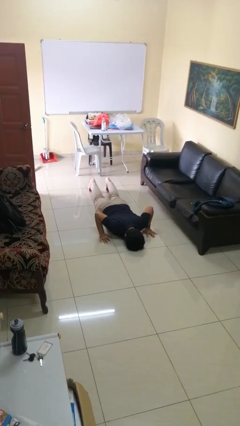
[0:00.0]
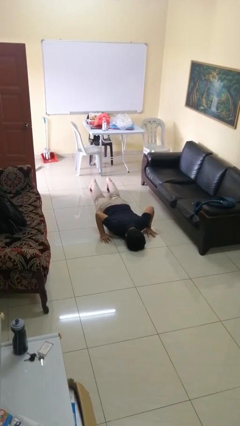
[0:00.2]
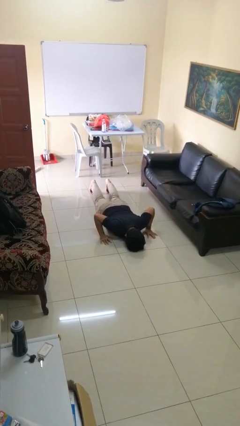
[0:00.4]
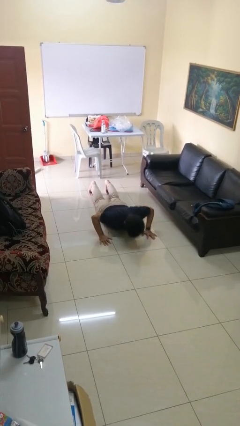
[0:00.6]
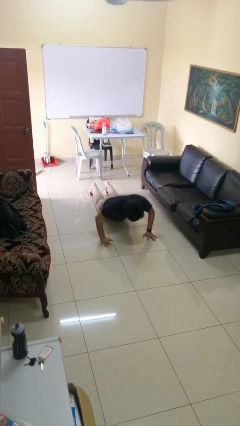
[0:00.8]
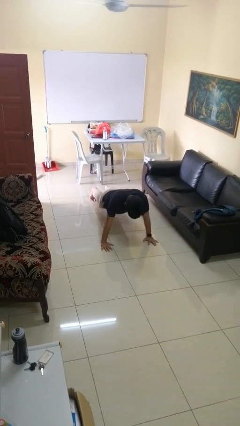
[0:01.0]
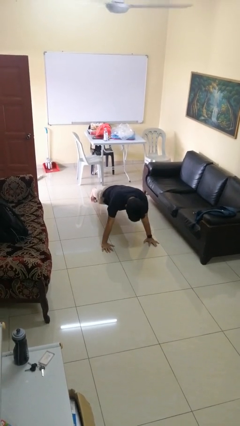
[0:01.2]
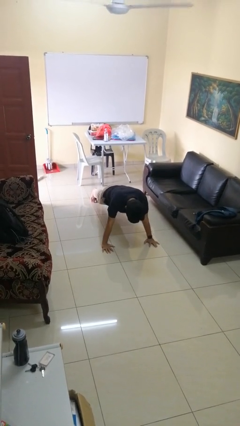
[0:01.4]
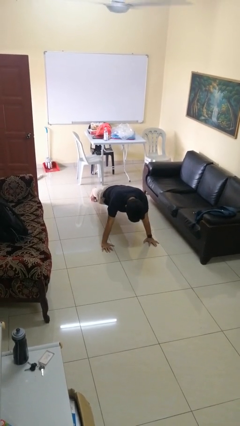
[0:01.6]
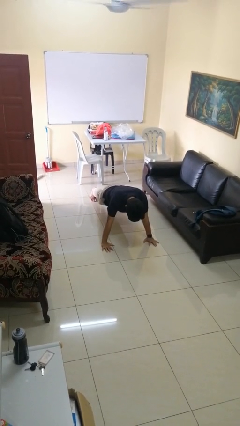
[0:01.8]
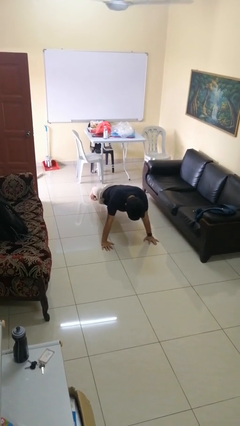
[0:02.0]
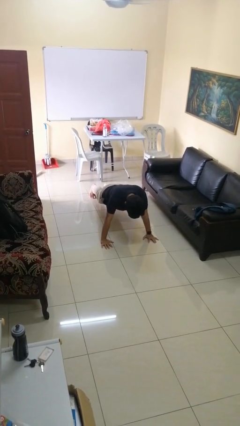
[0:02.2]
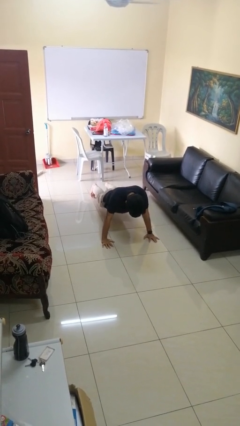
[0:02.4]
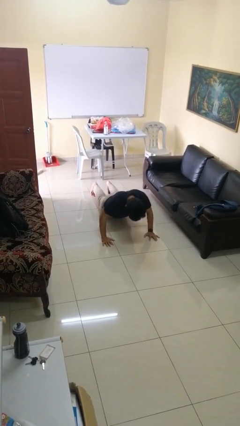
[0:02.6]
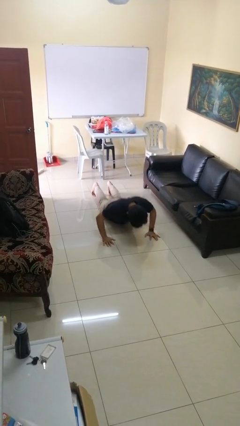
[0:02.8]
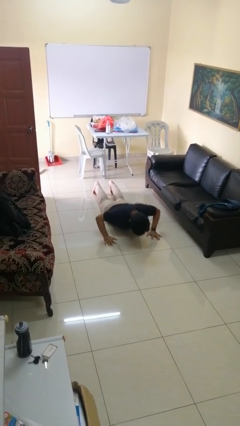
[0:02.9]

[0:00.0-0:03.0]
person exercises with pushup

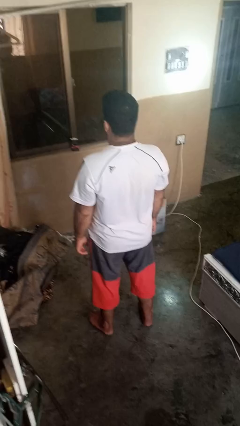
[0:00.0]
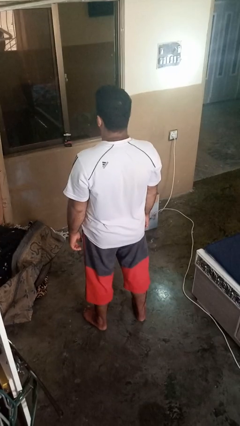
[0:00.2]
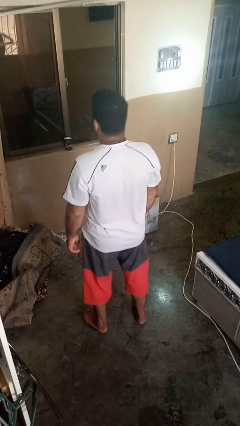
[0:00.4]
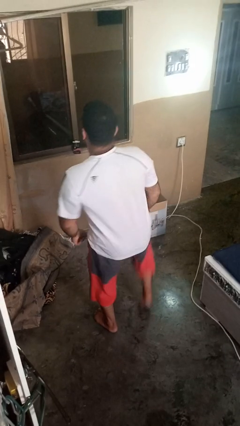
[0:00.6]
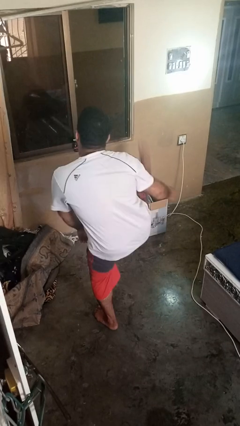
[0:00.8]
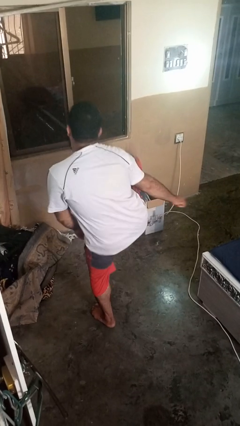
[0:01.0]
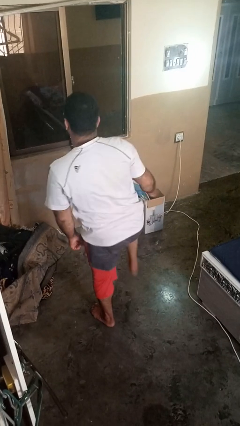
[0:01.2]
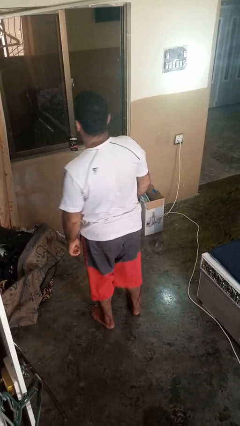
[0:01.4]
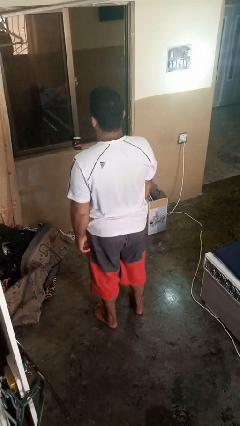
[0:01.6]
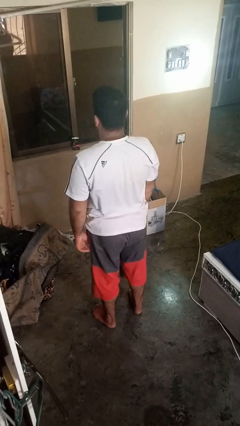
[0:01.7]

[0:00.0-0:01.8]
person karate kicks

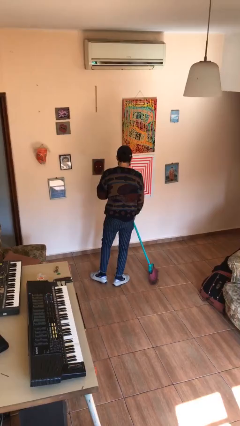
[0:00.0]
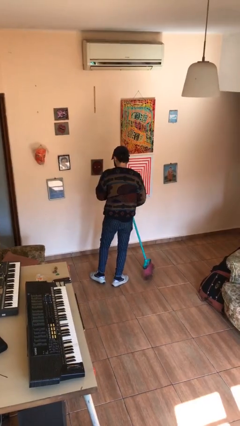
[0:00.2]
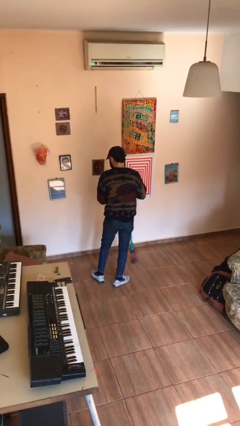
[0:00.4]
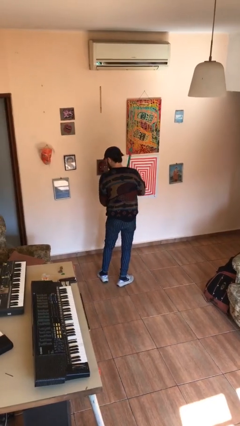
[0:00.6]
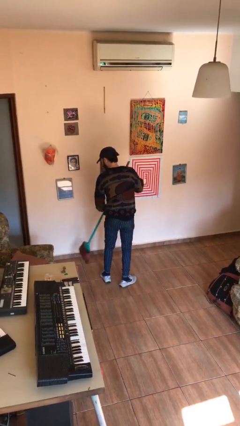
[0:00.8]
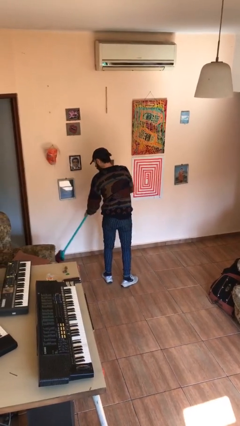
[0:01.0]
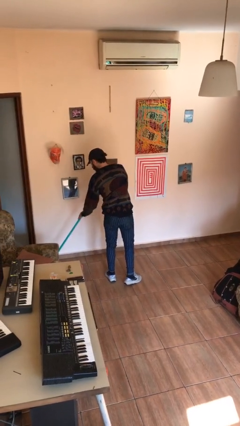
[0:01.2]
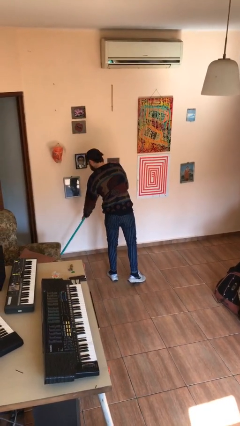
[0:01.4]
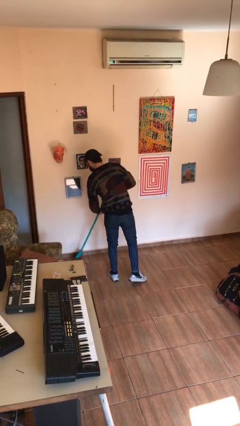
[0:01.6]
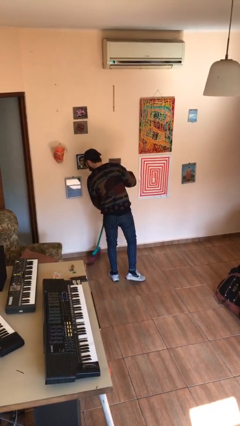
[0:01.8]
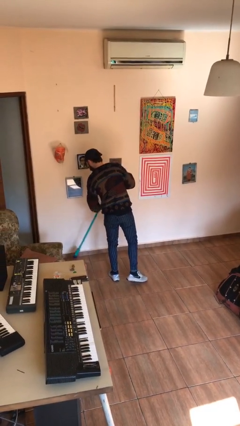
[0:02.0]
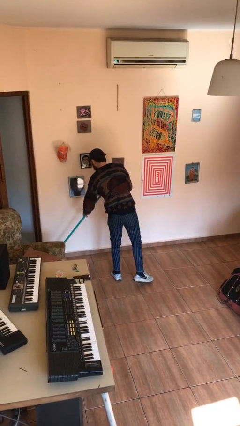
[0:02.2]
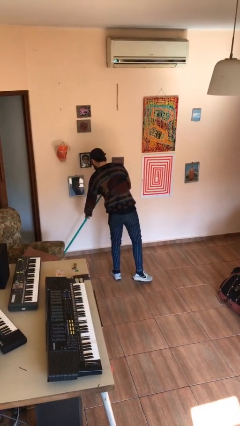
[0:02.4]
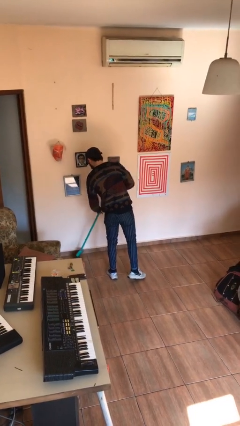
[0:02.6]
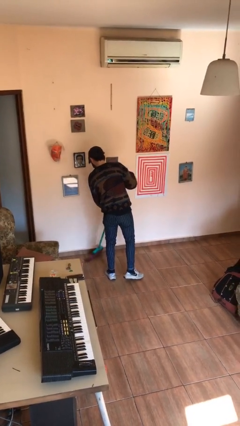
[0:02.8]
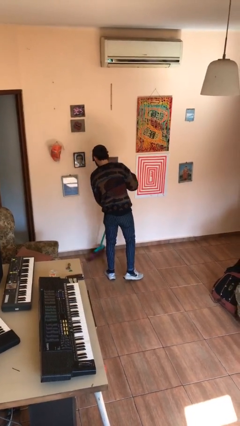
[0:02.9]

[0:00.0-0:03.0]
person sweeps floor

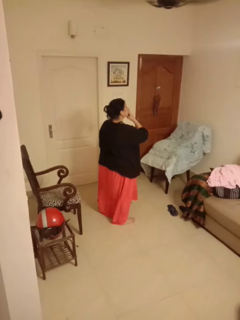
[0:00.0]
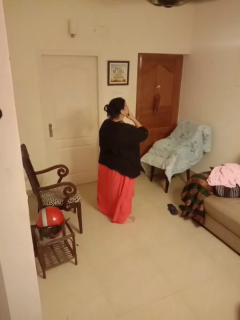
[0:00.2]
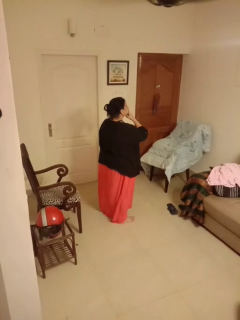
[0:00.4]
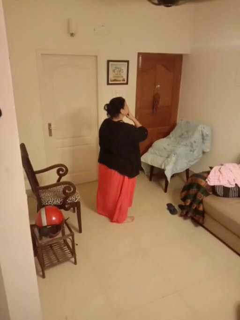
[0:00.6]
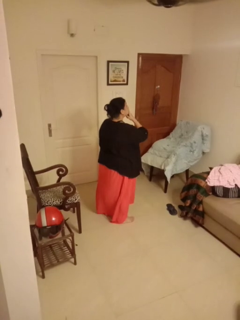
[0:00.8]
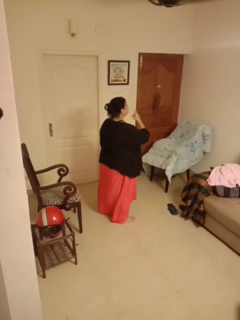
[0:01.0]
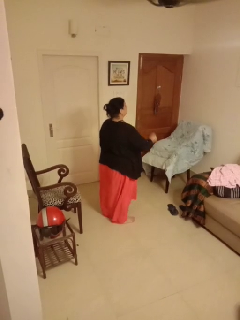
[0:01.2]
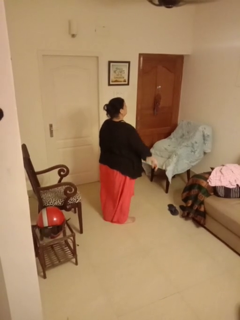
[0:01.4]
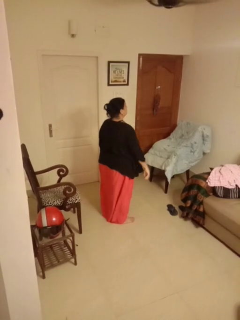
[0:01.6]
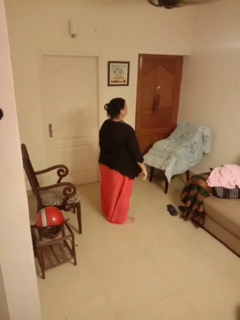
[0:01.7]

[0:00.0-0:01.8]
person gestures be quiet

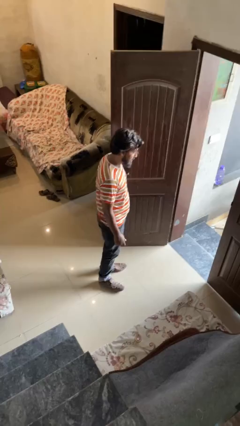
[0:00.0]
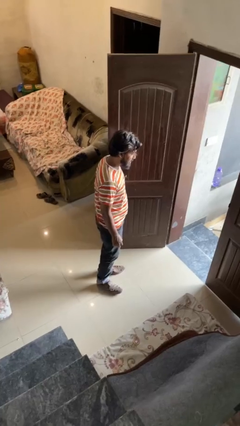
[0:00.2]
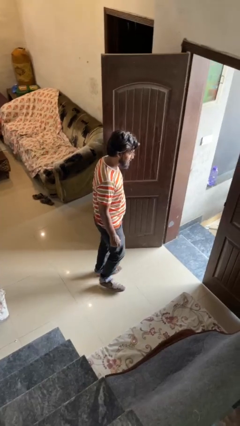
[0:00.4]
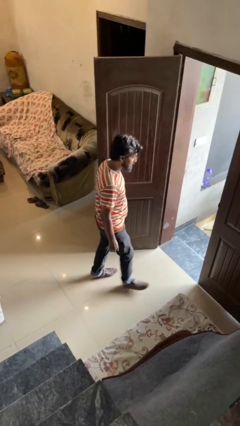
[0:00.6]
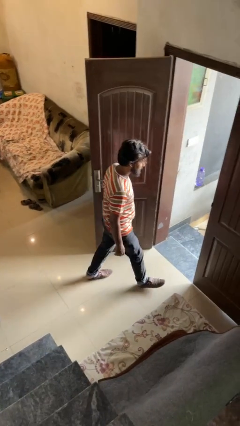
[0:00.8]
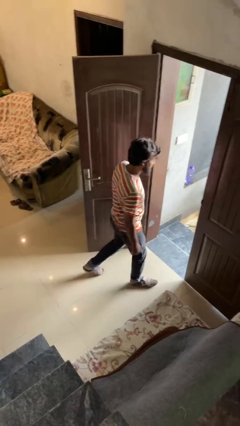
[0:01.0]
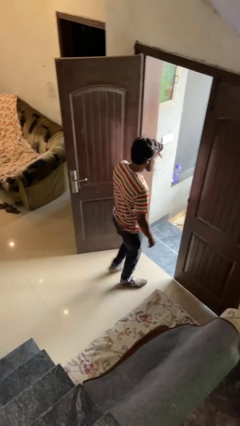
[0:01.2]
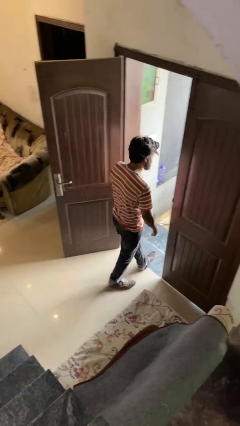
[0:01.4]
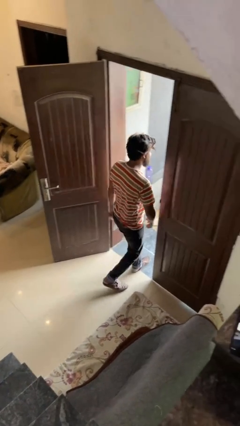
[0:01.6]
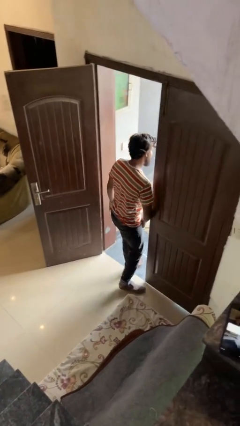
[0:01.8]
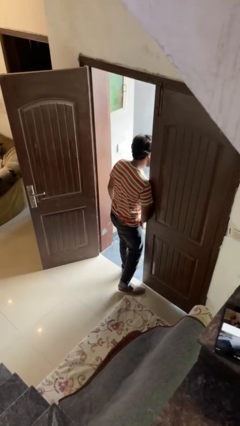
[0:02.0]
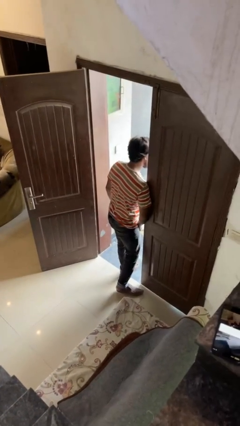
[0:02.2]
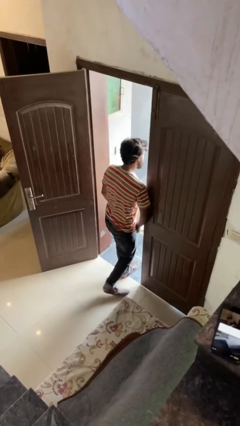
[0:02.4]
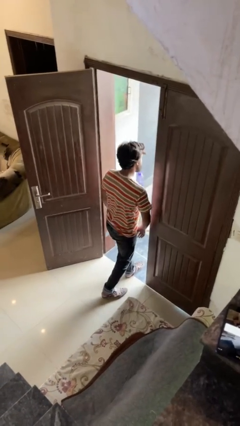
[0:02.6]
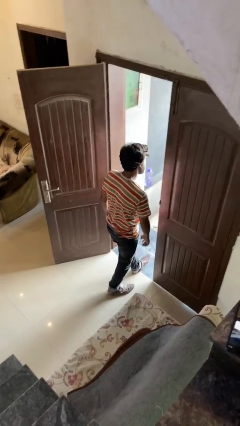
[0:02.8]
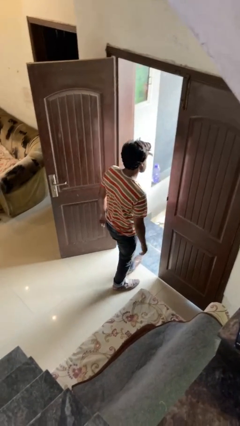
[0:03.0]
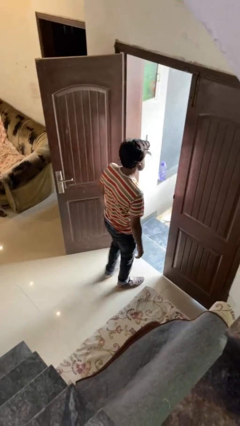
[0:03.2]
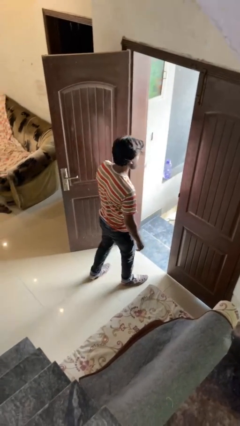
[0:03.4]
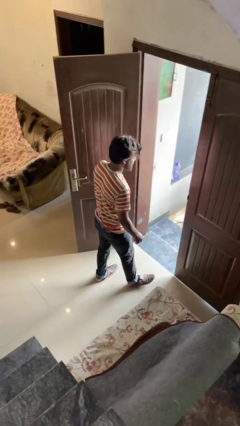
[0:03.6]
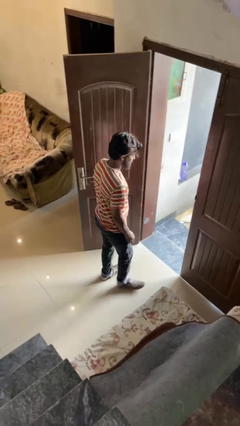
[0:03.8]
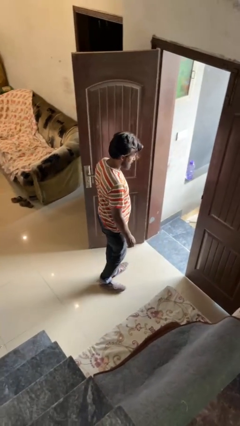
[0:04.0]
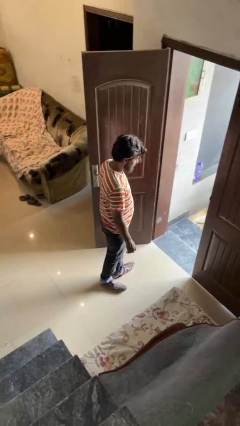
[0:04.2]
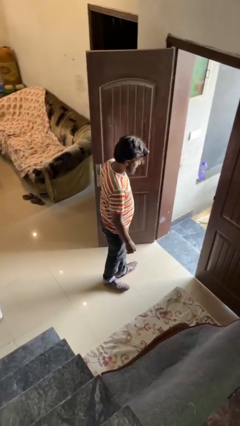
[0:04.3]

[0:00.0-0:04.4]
person bumps into wall

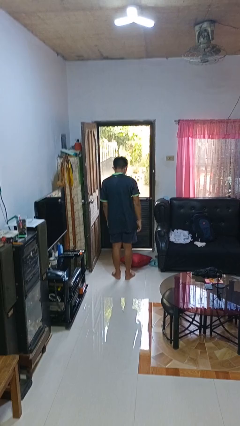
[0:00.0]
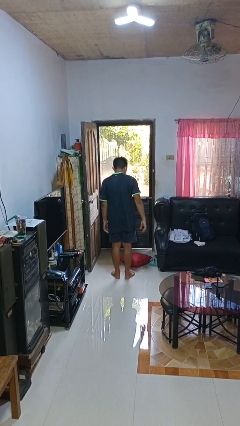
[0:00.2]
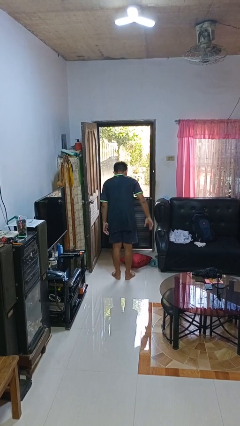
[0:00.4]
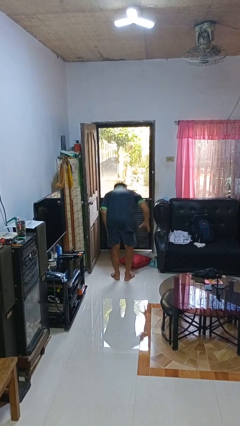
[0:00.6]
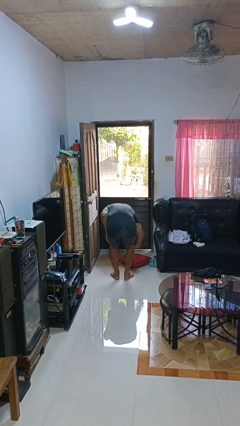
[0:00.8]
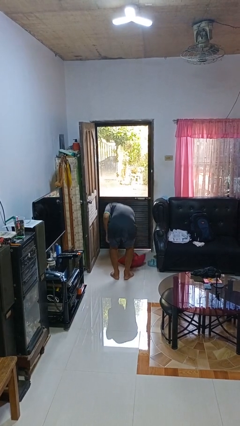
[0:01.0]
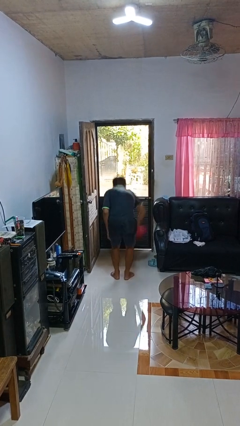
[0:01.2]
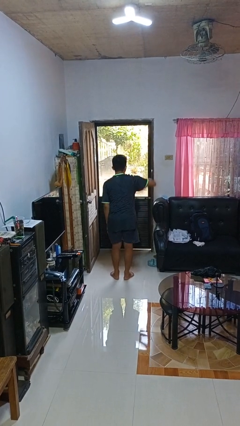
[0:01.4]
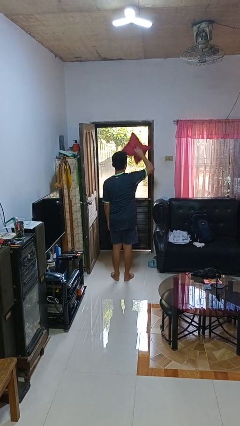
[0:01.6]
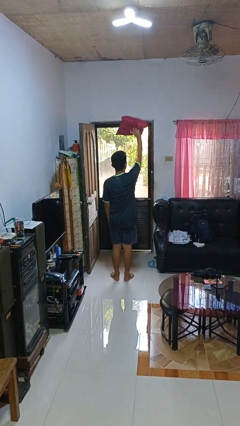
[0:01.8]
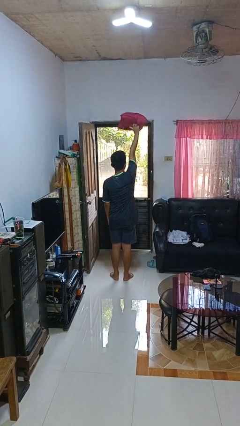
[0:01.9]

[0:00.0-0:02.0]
person picks up object from floor

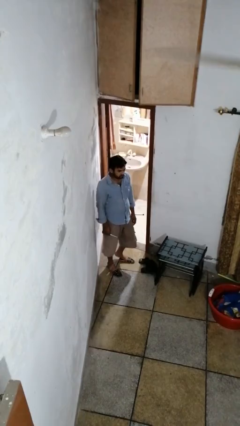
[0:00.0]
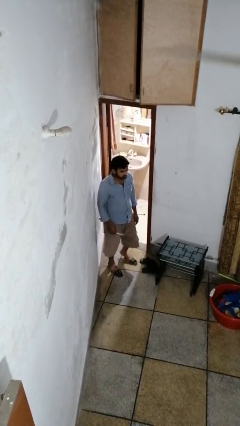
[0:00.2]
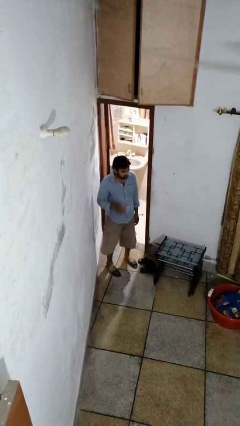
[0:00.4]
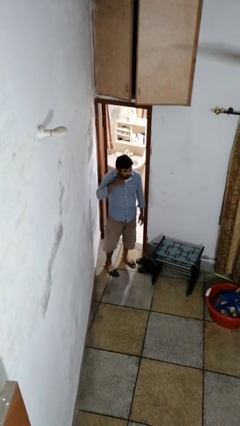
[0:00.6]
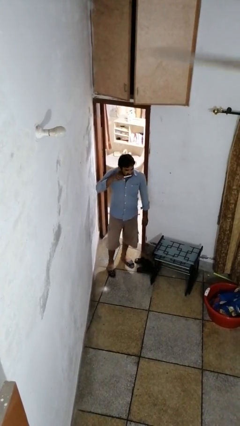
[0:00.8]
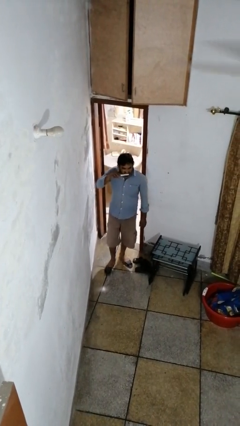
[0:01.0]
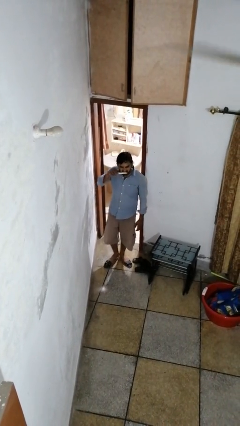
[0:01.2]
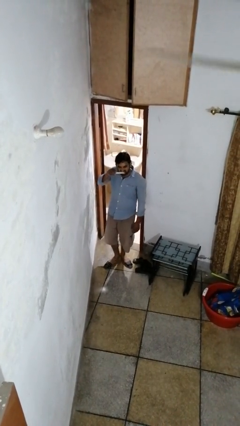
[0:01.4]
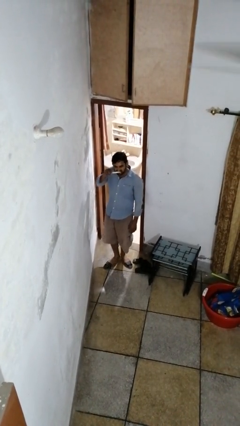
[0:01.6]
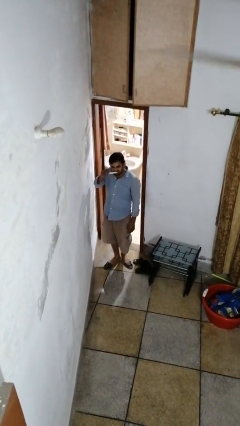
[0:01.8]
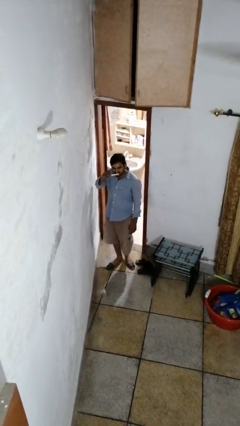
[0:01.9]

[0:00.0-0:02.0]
person brushes teeth
